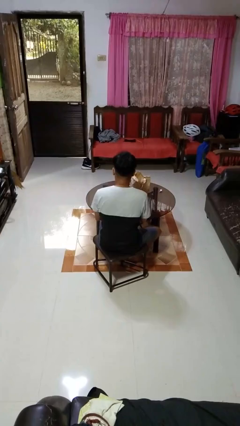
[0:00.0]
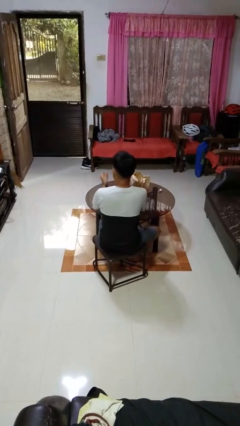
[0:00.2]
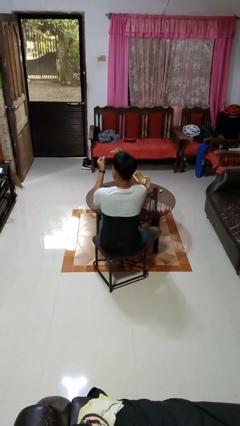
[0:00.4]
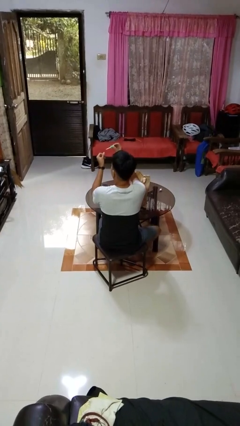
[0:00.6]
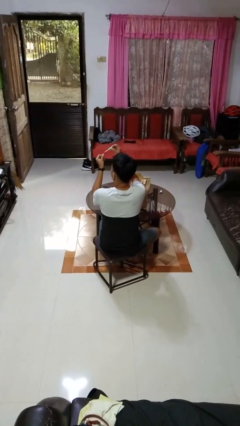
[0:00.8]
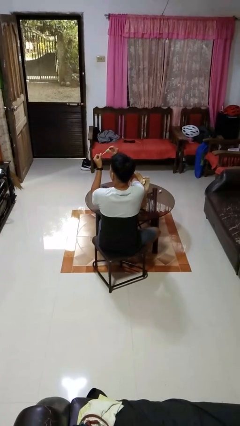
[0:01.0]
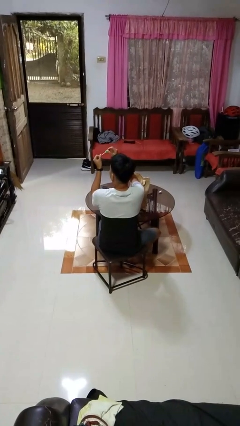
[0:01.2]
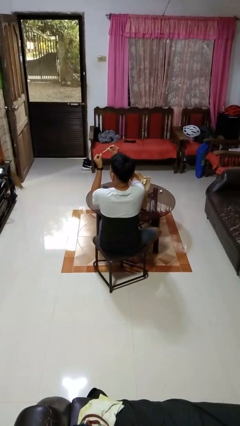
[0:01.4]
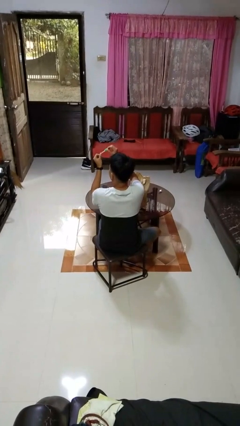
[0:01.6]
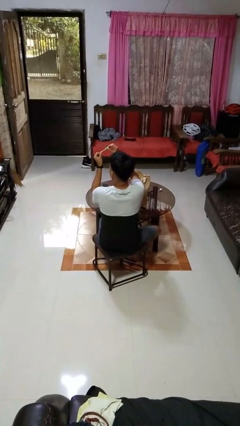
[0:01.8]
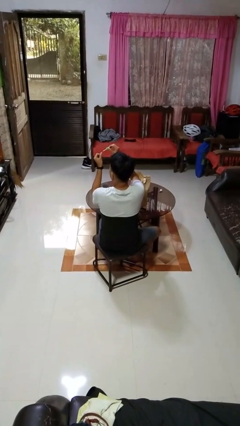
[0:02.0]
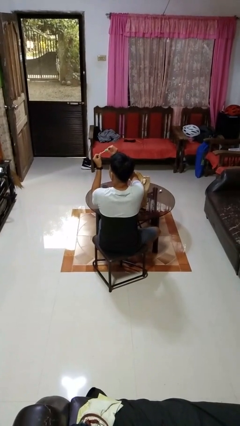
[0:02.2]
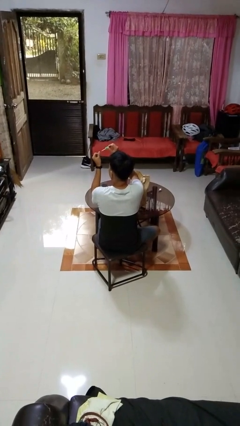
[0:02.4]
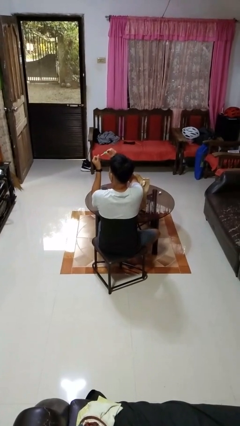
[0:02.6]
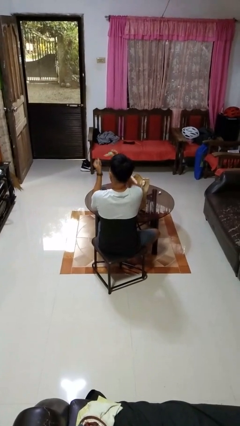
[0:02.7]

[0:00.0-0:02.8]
person paints fingernails

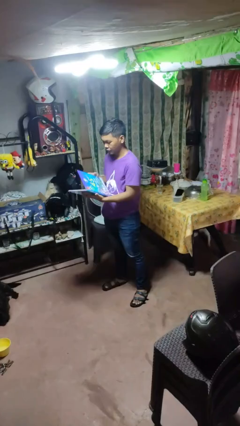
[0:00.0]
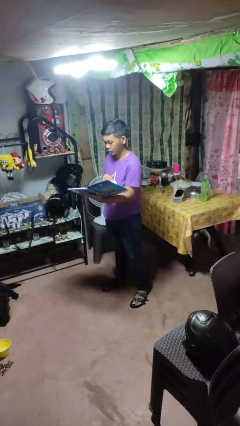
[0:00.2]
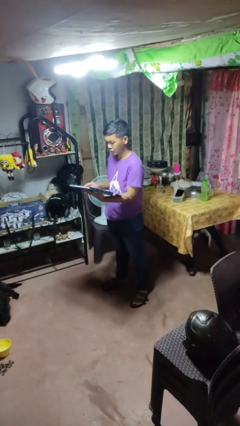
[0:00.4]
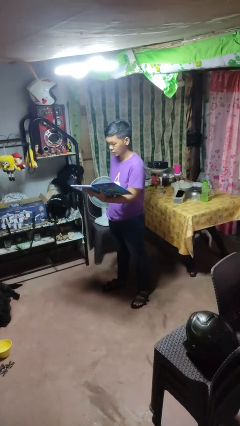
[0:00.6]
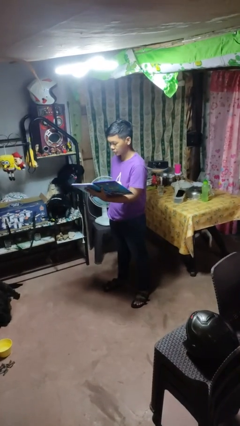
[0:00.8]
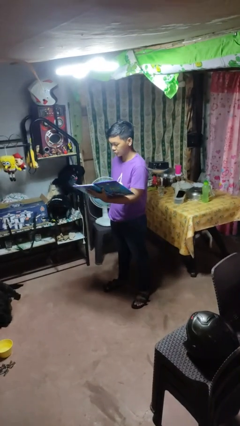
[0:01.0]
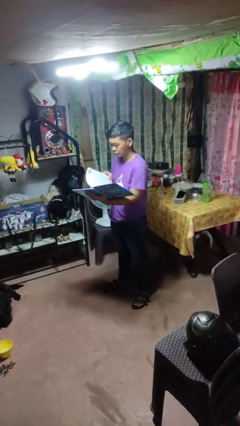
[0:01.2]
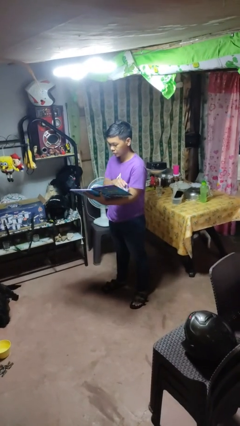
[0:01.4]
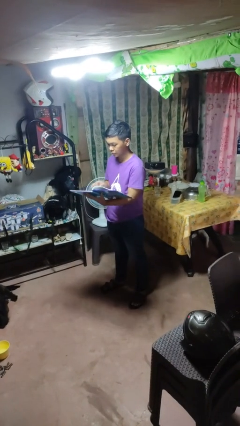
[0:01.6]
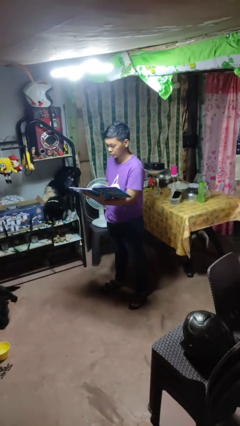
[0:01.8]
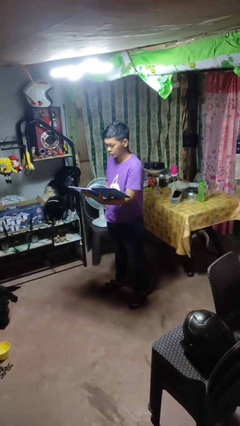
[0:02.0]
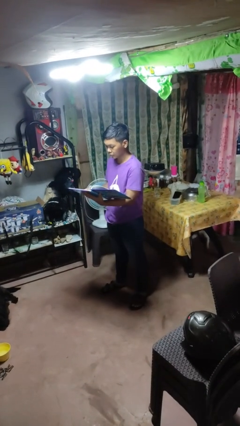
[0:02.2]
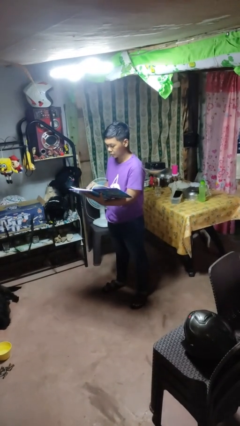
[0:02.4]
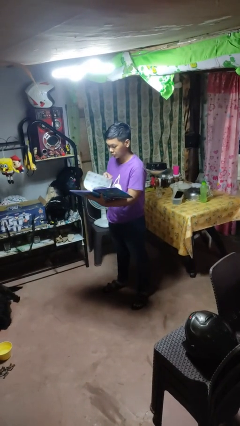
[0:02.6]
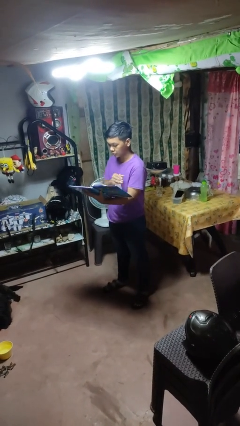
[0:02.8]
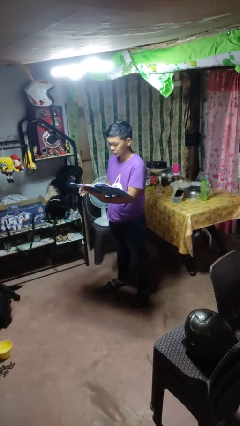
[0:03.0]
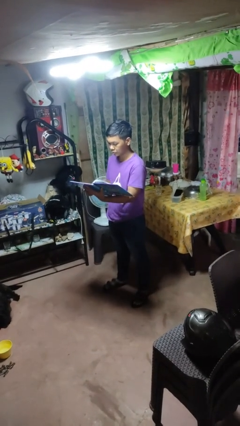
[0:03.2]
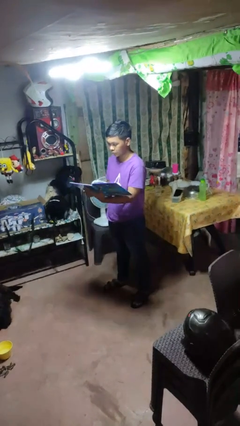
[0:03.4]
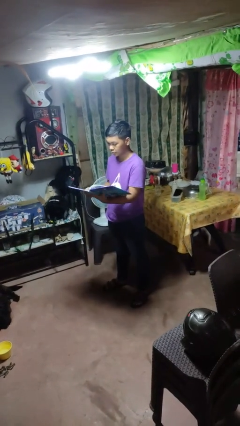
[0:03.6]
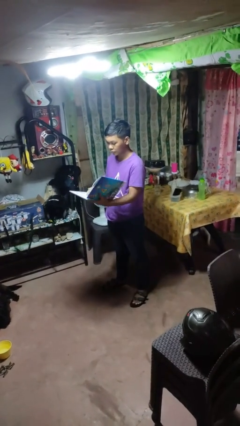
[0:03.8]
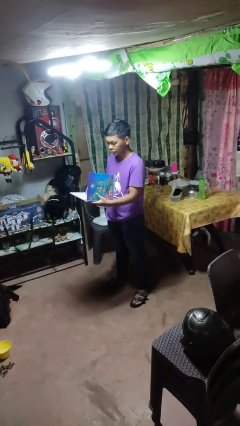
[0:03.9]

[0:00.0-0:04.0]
person reads magazine

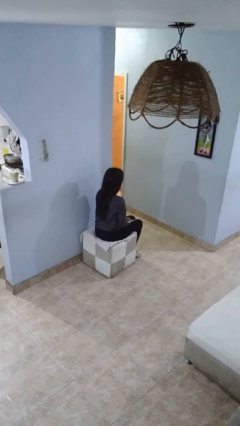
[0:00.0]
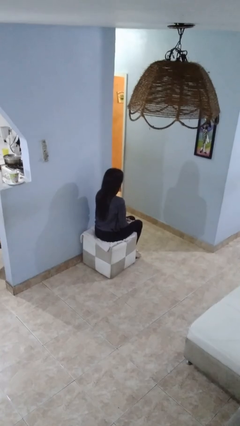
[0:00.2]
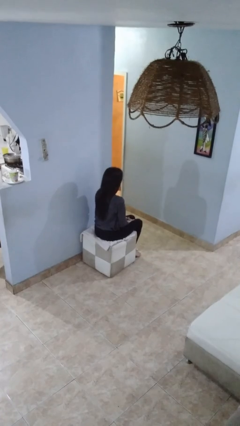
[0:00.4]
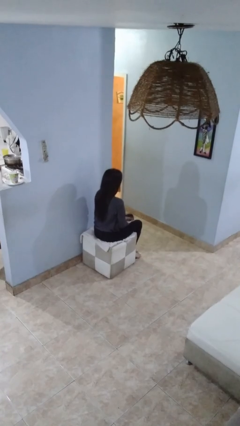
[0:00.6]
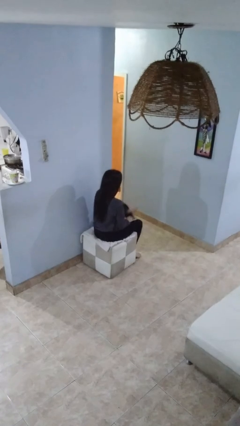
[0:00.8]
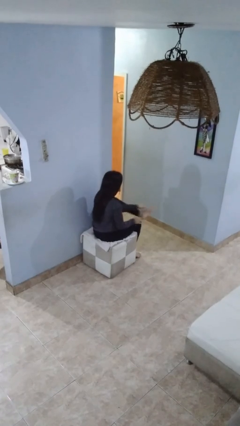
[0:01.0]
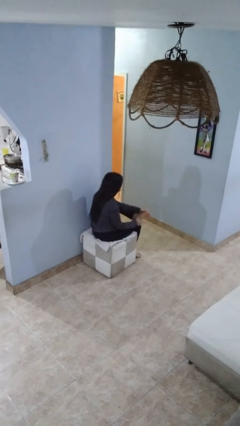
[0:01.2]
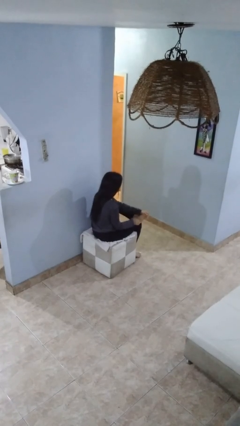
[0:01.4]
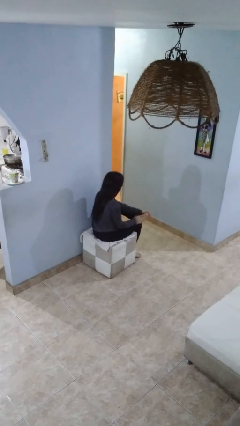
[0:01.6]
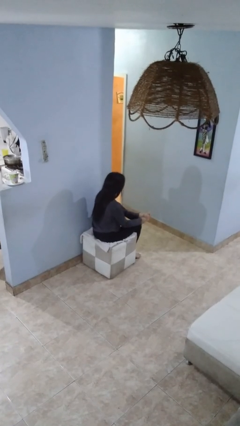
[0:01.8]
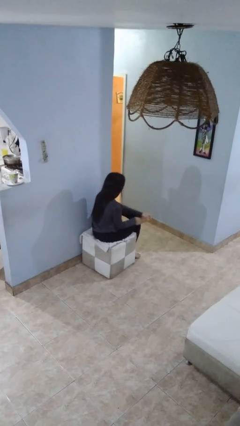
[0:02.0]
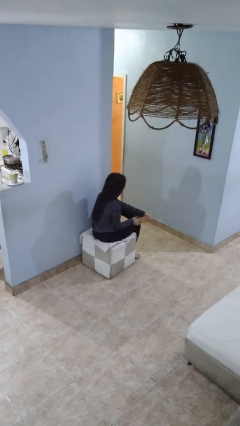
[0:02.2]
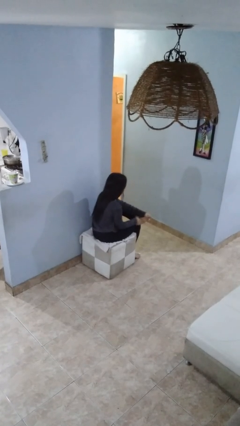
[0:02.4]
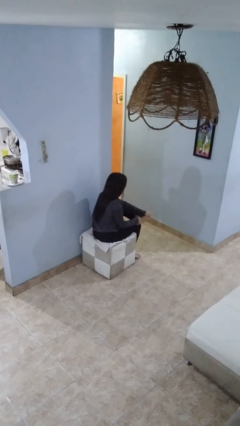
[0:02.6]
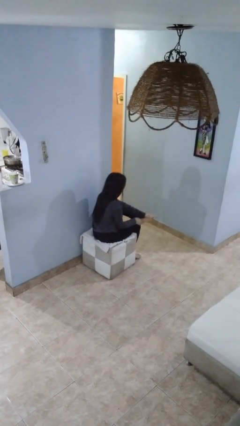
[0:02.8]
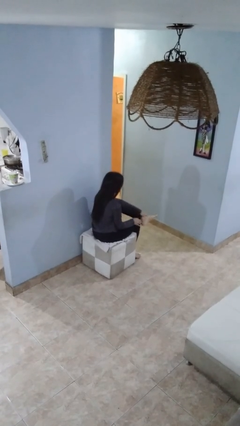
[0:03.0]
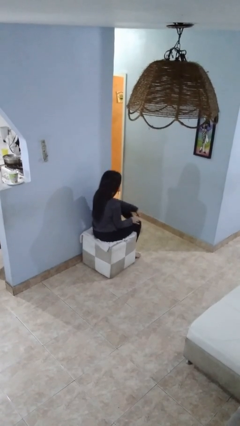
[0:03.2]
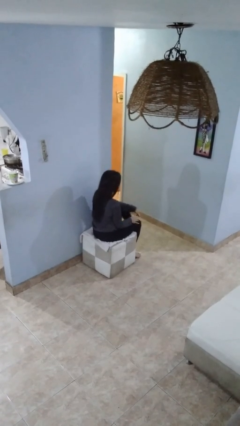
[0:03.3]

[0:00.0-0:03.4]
person rubs foot

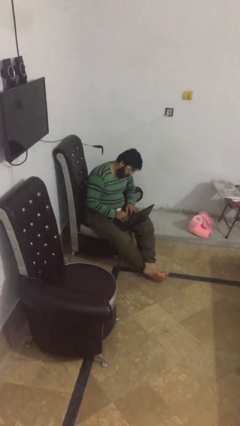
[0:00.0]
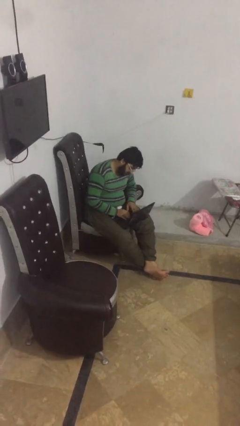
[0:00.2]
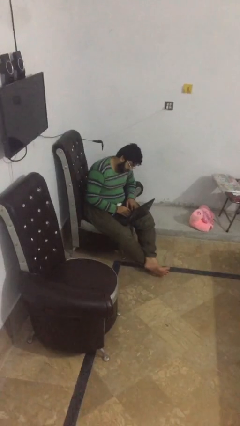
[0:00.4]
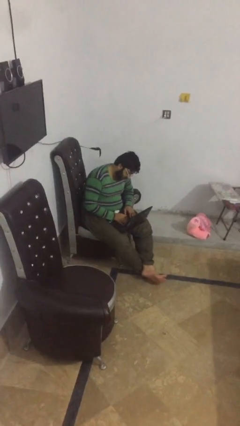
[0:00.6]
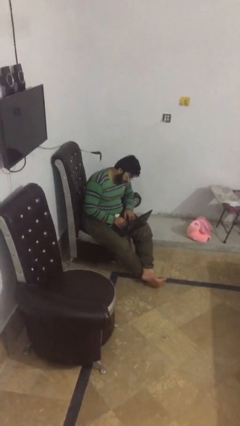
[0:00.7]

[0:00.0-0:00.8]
person interacts with laptop

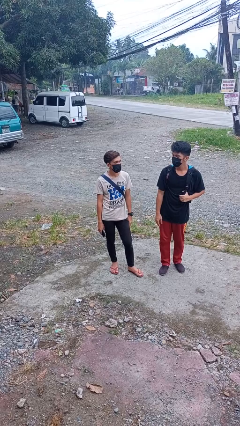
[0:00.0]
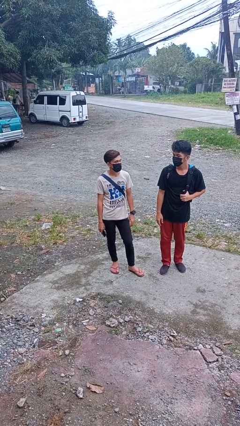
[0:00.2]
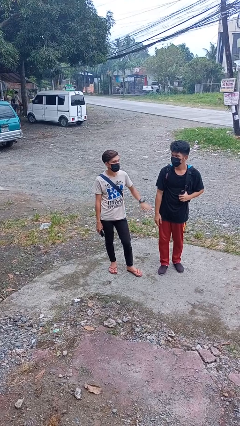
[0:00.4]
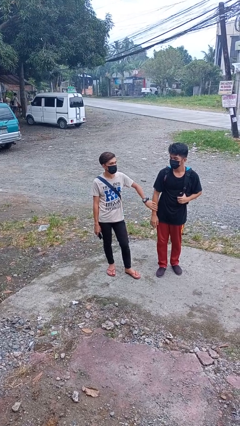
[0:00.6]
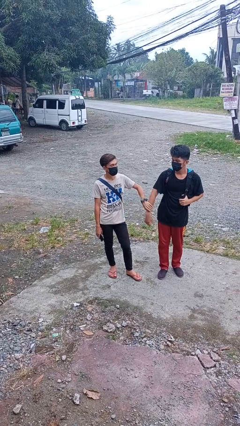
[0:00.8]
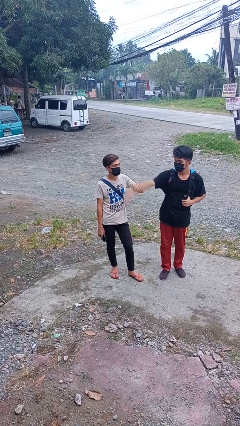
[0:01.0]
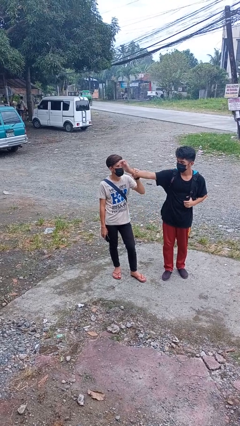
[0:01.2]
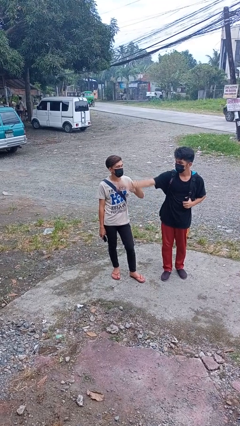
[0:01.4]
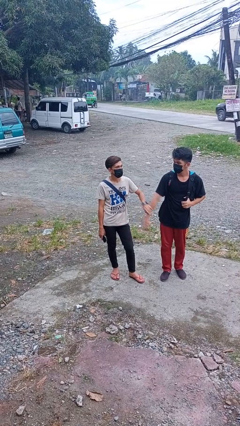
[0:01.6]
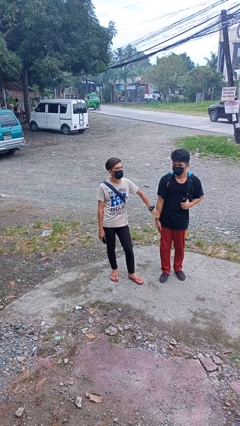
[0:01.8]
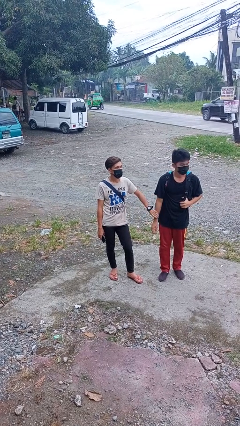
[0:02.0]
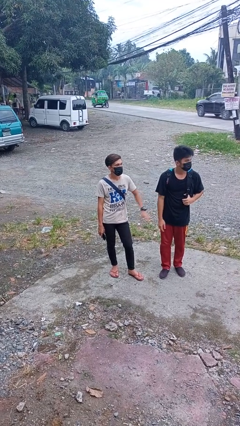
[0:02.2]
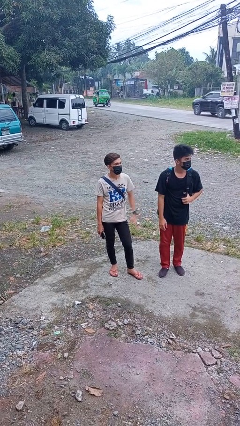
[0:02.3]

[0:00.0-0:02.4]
person grabs person by forearm

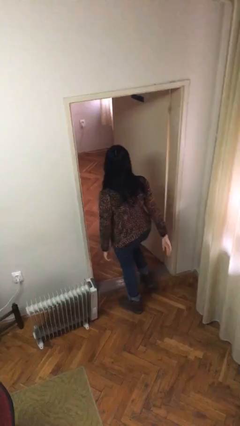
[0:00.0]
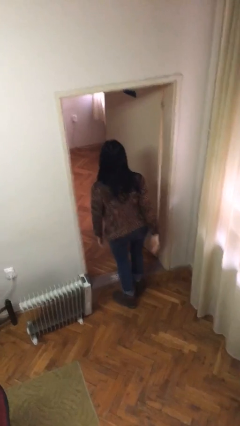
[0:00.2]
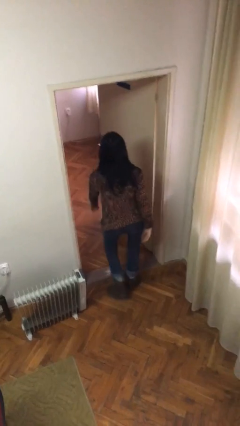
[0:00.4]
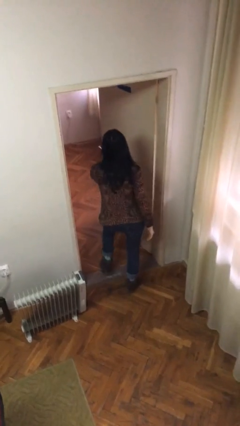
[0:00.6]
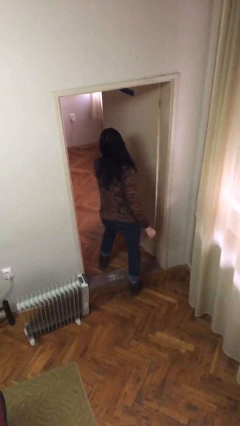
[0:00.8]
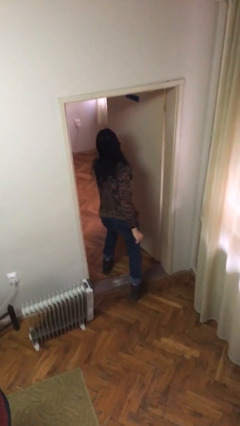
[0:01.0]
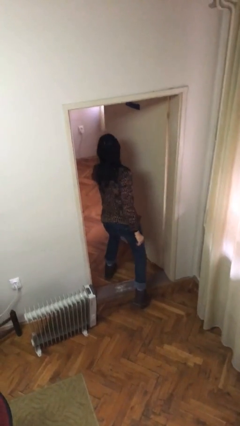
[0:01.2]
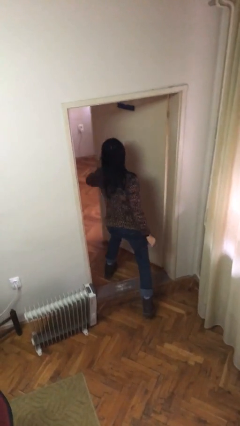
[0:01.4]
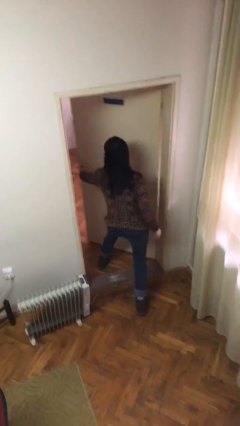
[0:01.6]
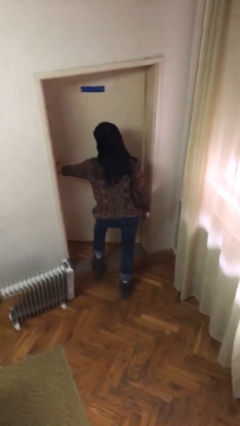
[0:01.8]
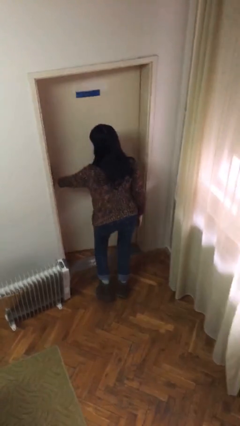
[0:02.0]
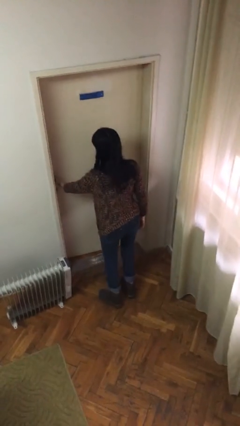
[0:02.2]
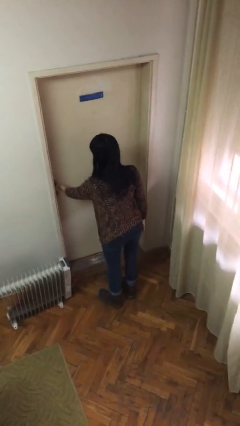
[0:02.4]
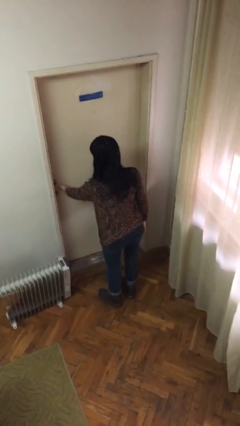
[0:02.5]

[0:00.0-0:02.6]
person closes facility door

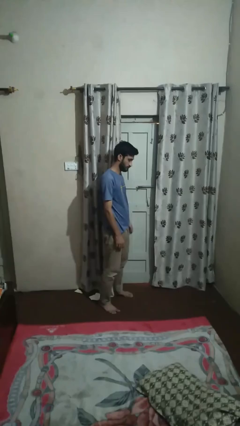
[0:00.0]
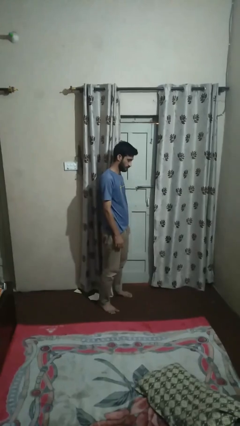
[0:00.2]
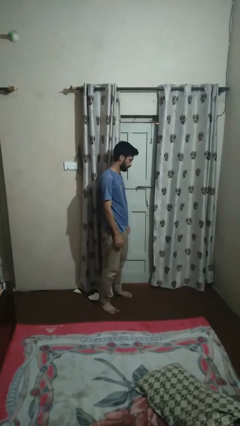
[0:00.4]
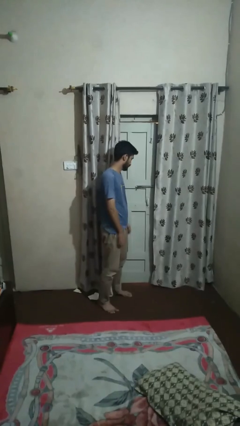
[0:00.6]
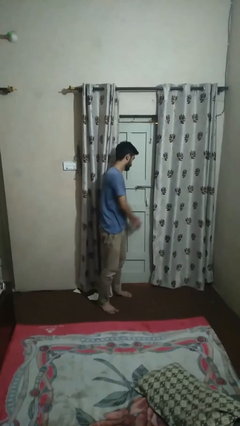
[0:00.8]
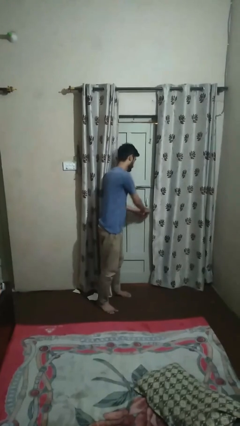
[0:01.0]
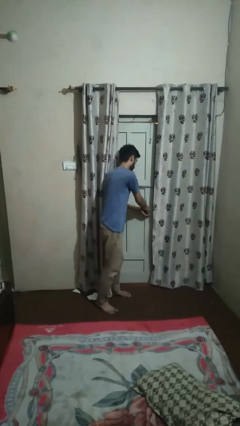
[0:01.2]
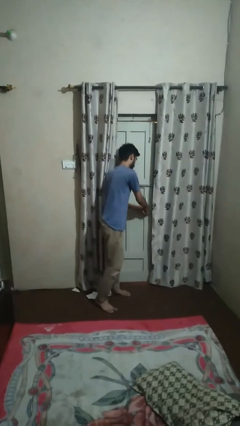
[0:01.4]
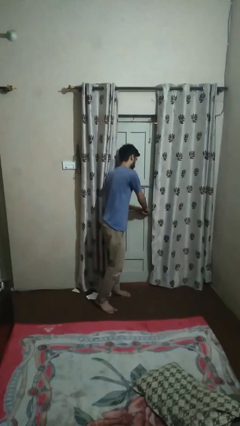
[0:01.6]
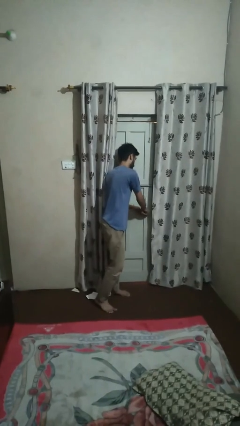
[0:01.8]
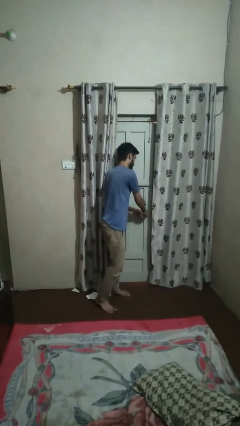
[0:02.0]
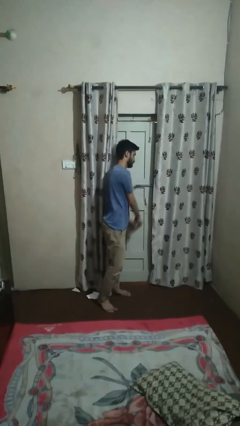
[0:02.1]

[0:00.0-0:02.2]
person locks door with keys
